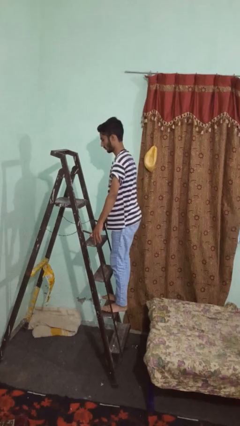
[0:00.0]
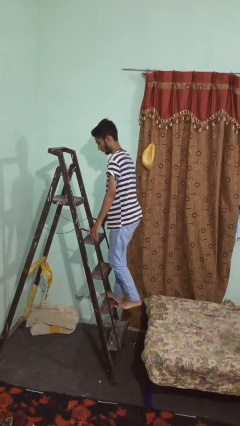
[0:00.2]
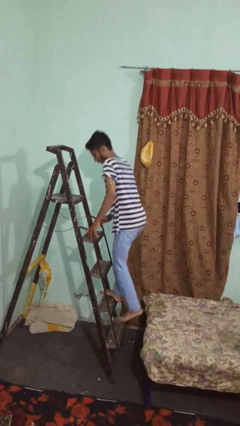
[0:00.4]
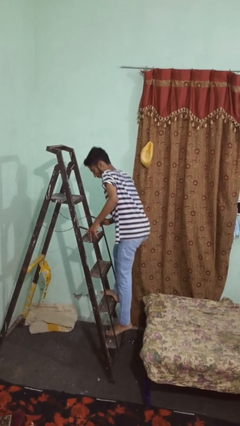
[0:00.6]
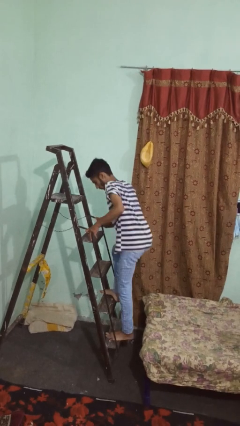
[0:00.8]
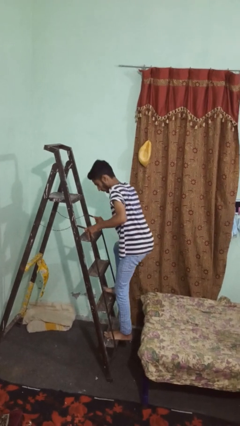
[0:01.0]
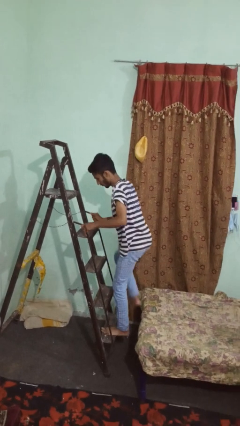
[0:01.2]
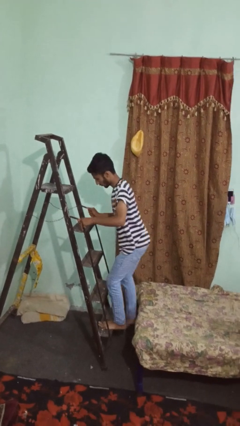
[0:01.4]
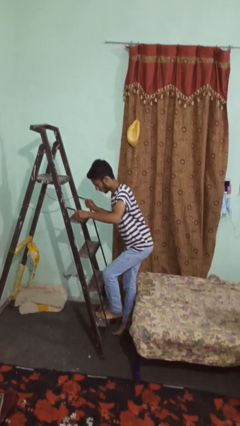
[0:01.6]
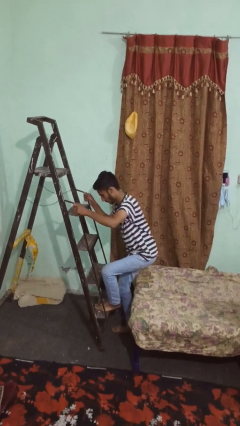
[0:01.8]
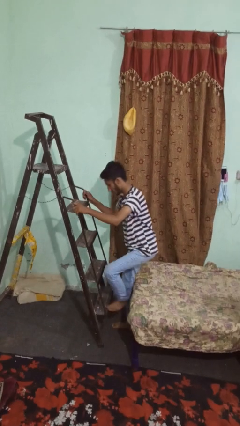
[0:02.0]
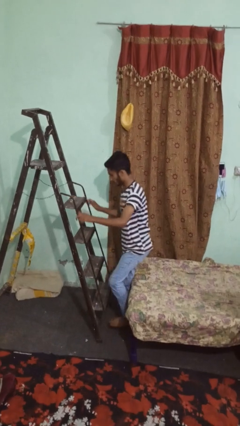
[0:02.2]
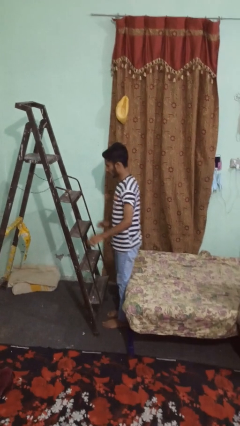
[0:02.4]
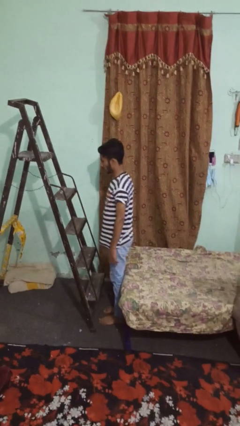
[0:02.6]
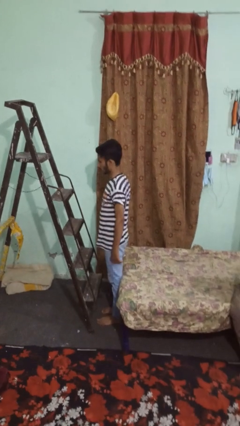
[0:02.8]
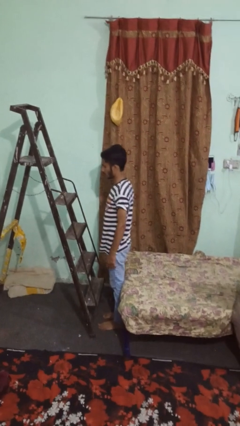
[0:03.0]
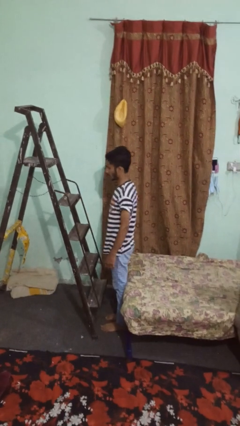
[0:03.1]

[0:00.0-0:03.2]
person climbs down ladder

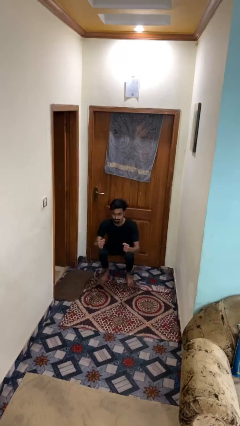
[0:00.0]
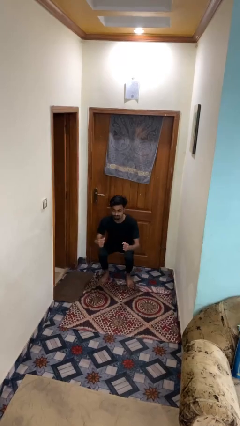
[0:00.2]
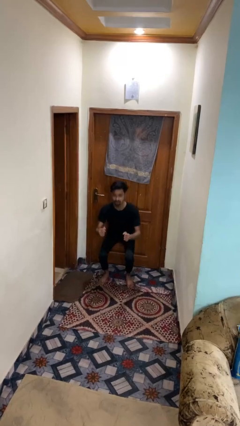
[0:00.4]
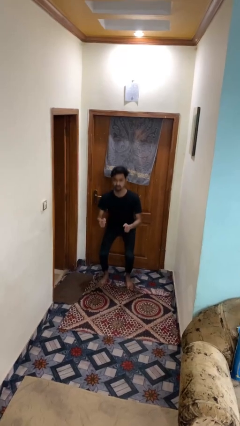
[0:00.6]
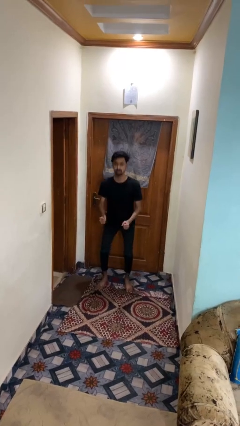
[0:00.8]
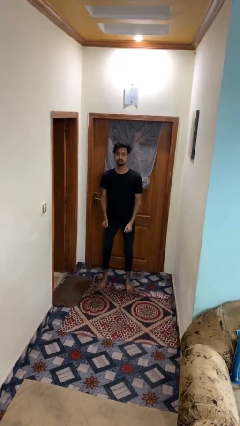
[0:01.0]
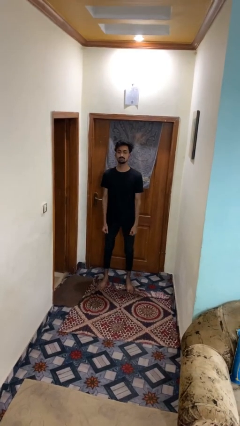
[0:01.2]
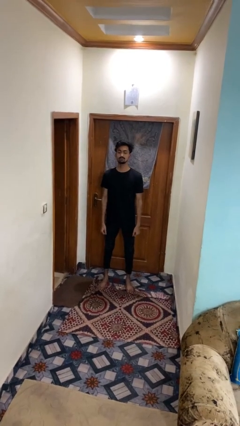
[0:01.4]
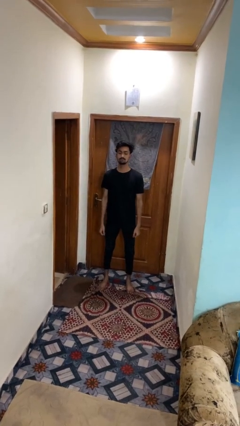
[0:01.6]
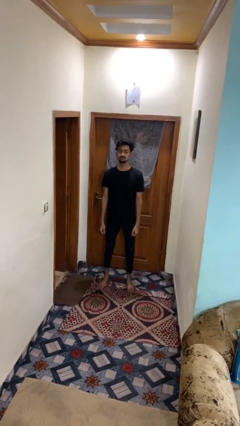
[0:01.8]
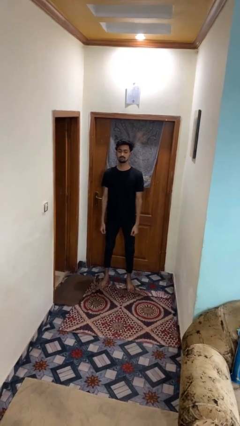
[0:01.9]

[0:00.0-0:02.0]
person stands up

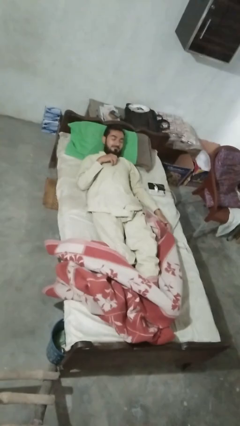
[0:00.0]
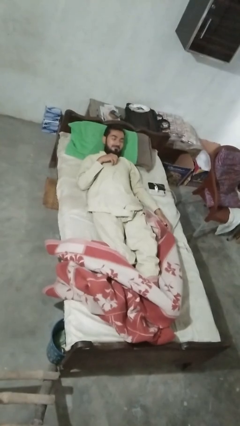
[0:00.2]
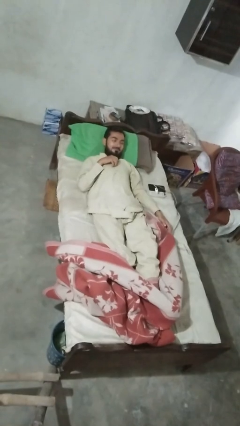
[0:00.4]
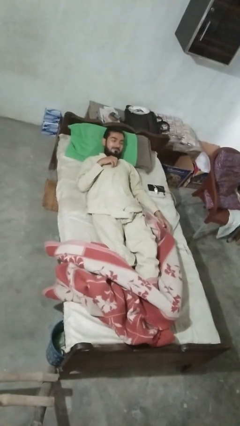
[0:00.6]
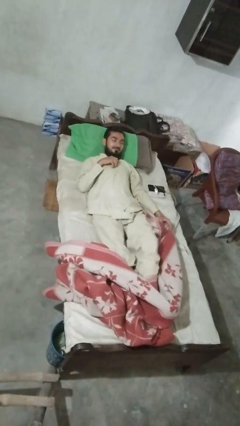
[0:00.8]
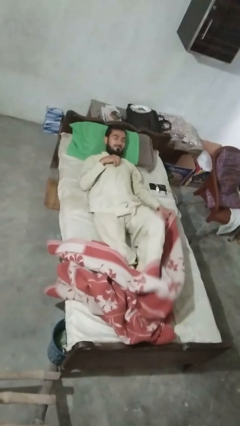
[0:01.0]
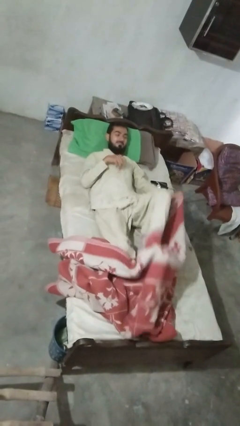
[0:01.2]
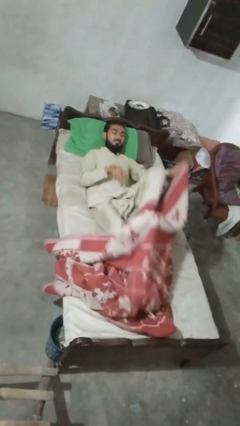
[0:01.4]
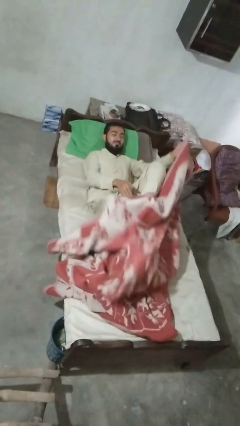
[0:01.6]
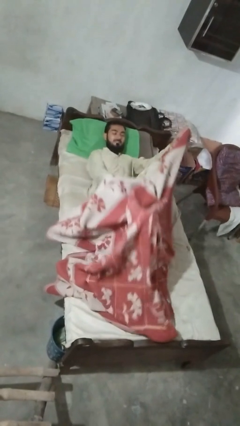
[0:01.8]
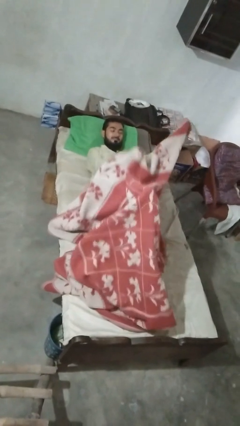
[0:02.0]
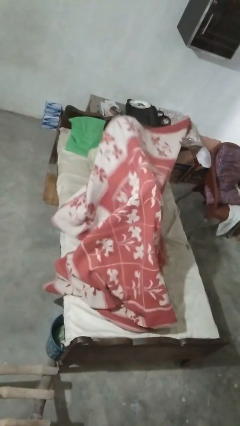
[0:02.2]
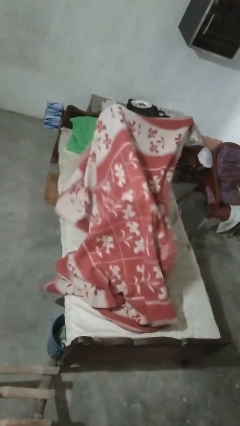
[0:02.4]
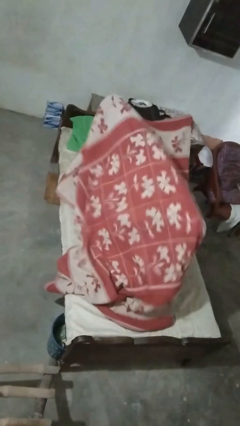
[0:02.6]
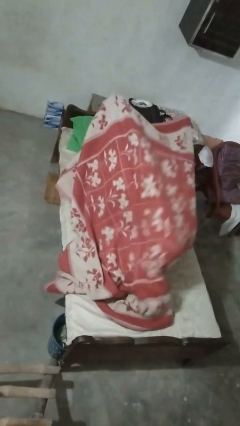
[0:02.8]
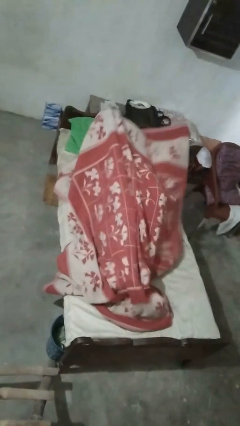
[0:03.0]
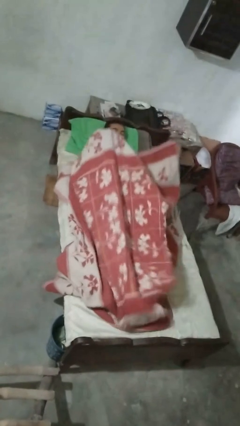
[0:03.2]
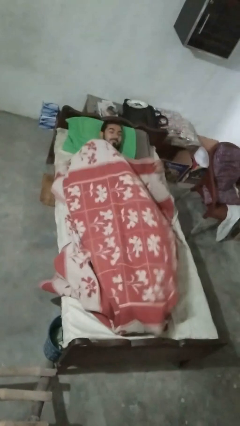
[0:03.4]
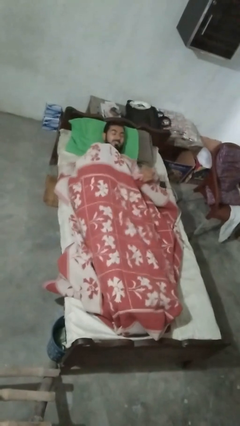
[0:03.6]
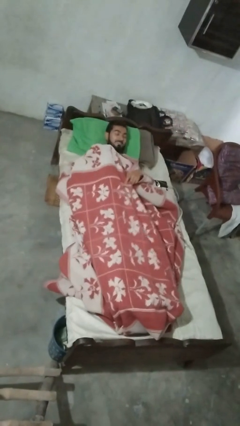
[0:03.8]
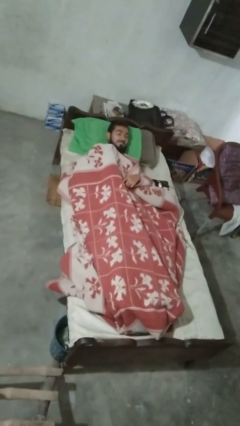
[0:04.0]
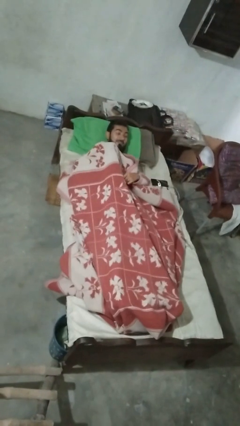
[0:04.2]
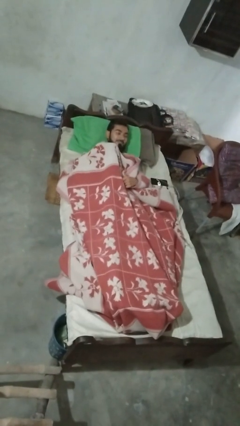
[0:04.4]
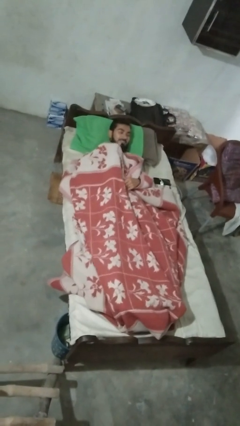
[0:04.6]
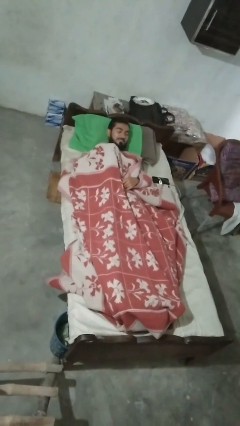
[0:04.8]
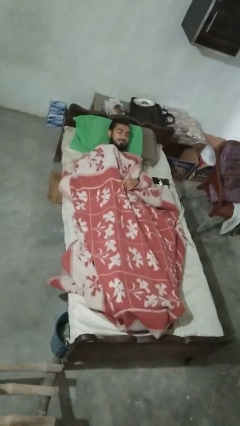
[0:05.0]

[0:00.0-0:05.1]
person covers with bedsheets

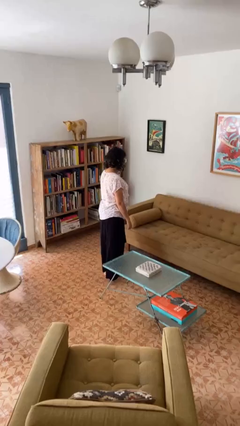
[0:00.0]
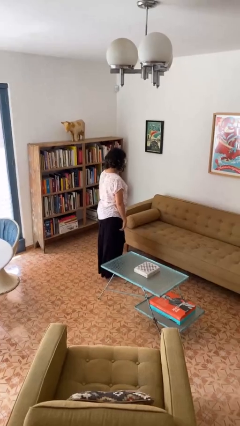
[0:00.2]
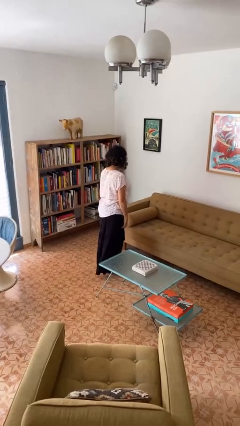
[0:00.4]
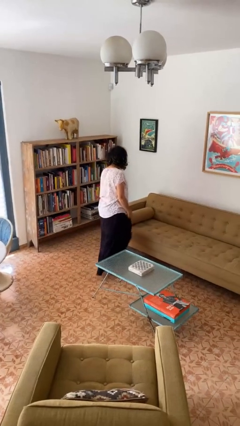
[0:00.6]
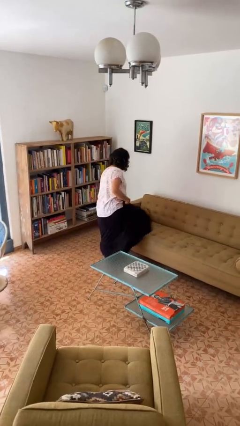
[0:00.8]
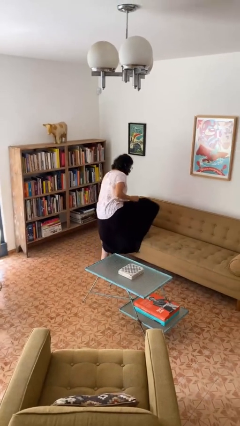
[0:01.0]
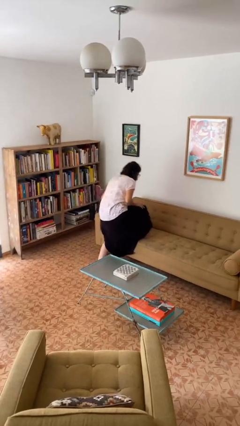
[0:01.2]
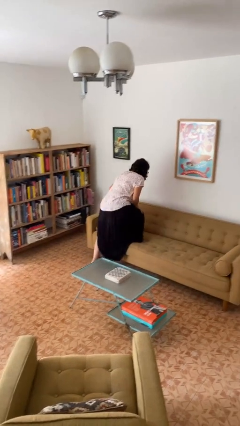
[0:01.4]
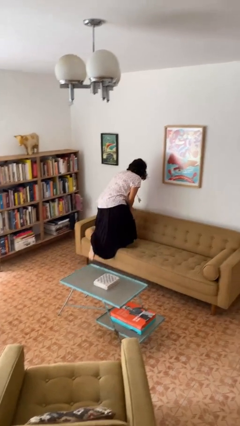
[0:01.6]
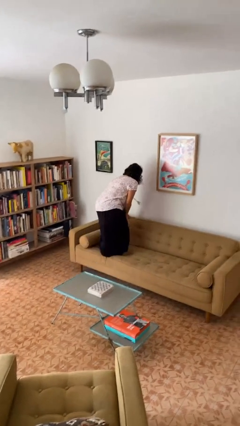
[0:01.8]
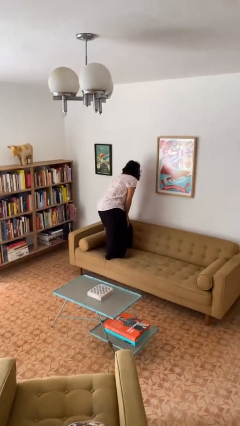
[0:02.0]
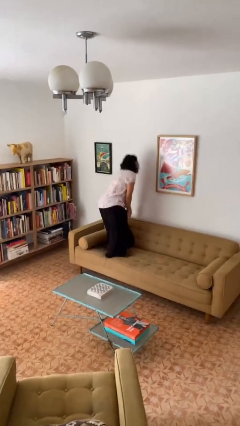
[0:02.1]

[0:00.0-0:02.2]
person climbs on couch

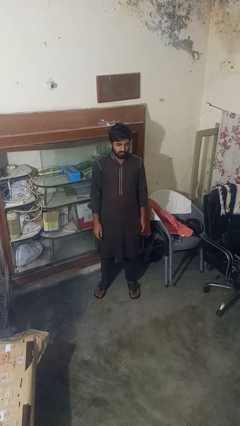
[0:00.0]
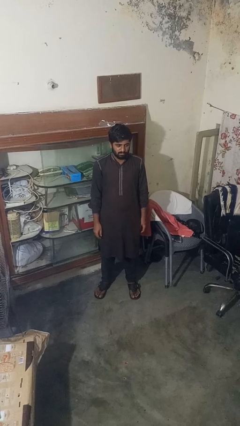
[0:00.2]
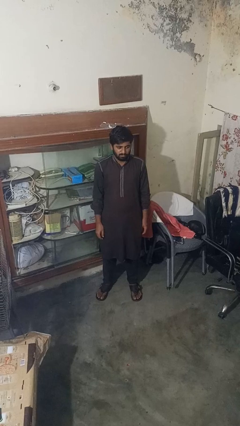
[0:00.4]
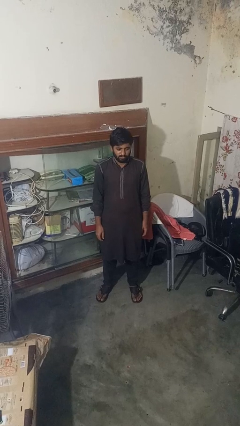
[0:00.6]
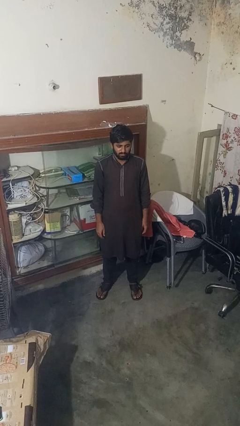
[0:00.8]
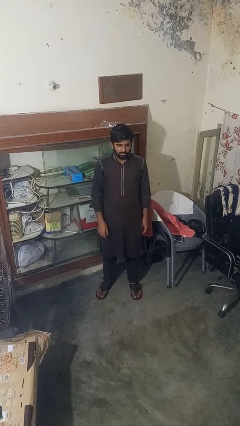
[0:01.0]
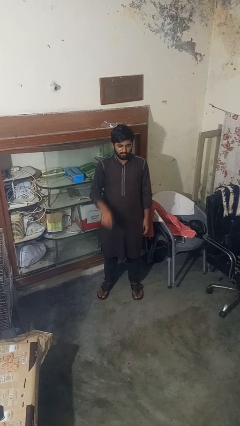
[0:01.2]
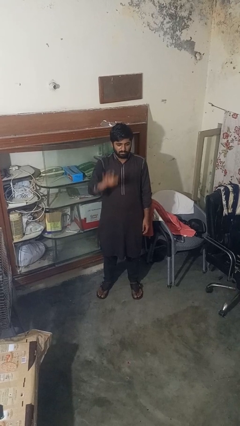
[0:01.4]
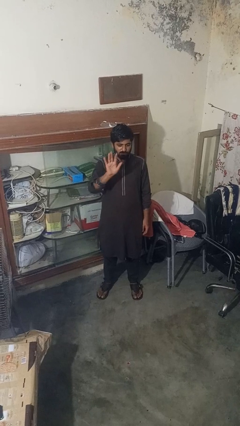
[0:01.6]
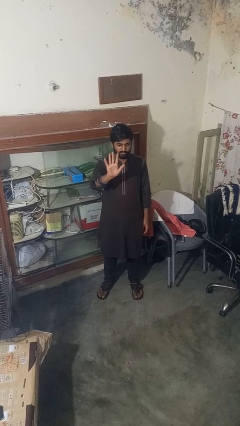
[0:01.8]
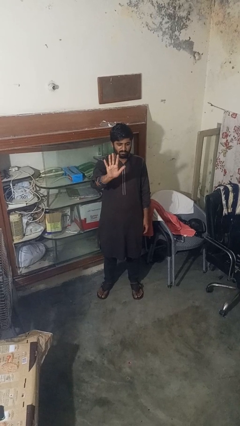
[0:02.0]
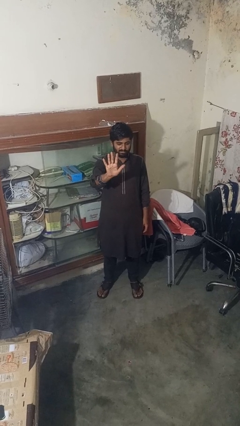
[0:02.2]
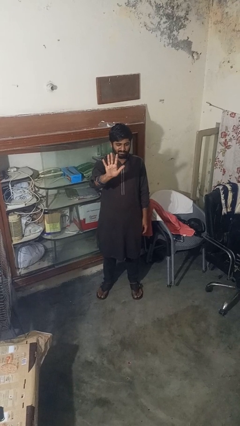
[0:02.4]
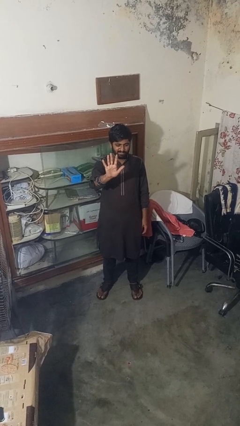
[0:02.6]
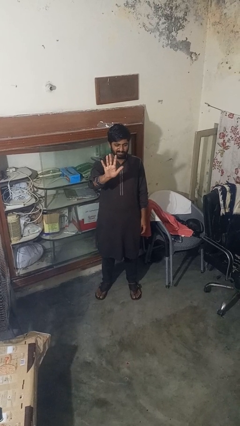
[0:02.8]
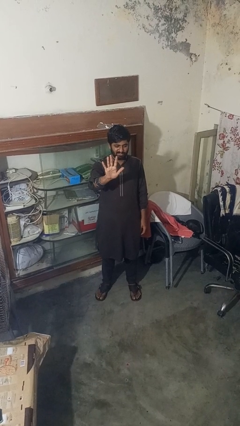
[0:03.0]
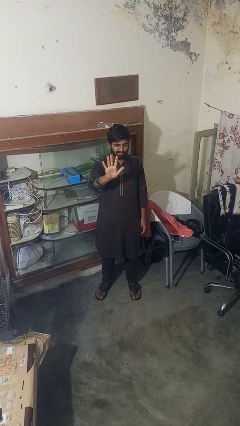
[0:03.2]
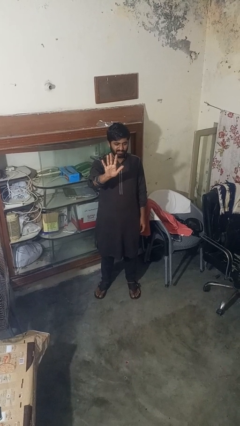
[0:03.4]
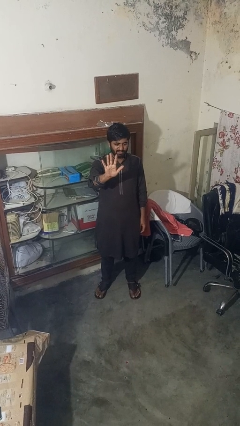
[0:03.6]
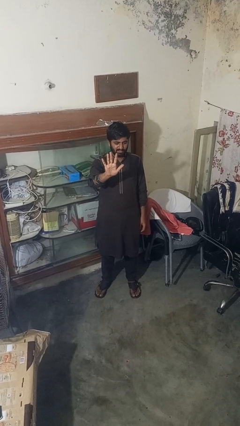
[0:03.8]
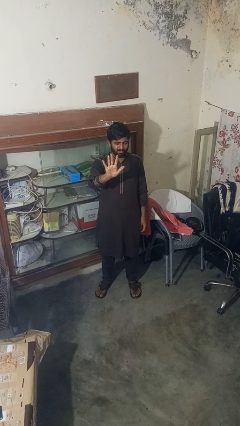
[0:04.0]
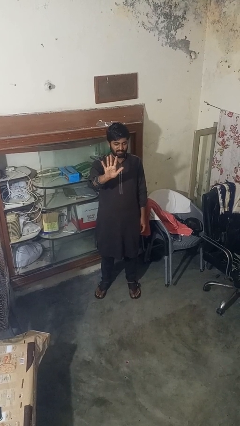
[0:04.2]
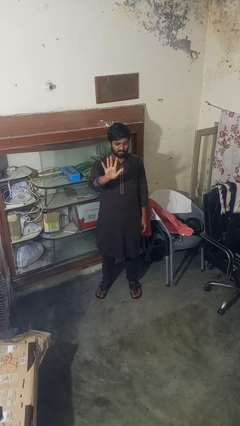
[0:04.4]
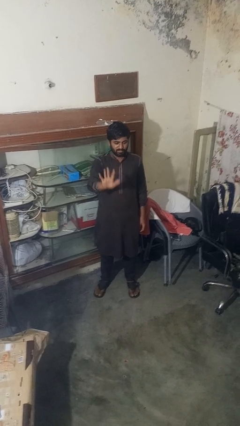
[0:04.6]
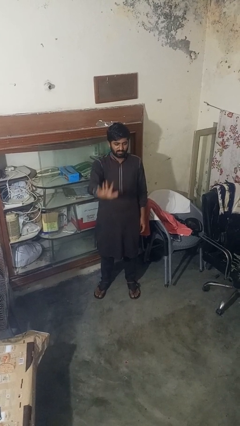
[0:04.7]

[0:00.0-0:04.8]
person gestures number five

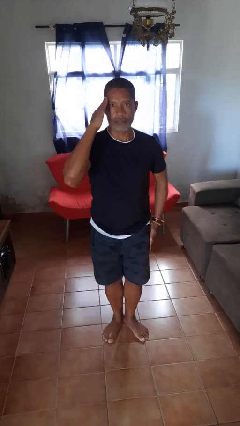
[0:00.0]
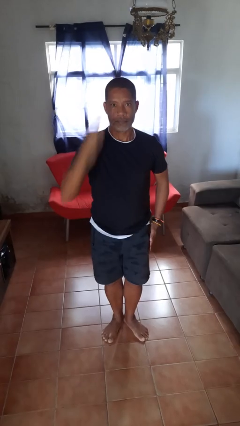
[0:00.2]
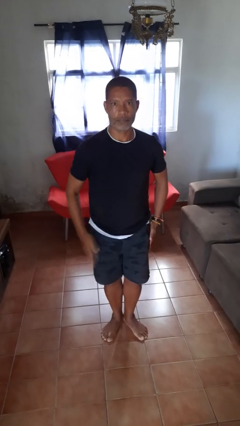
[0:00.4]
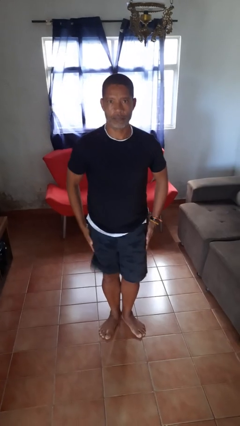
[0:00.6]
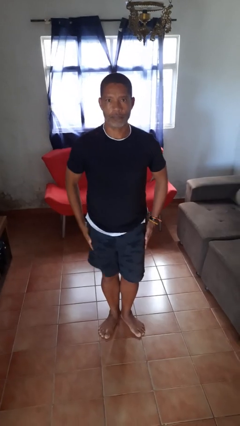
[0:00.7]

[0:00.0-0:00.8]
person salutes
